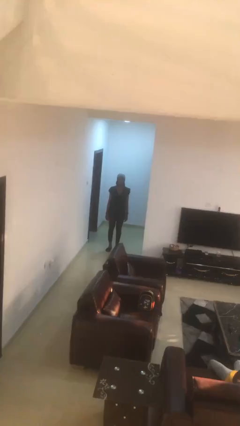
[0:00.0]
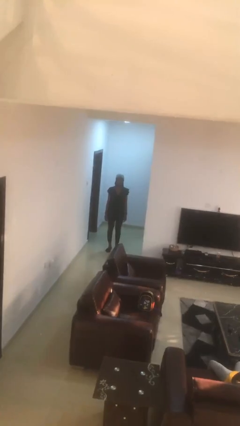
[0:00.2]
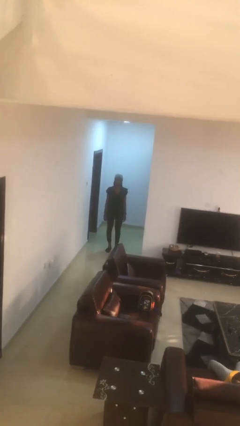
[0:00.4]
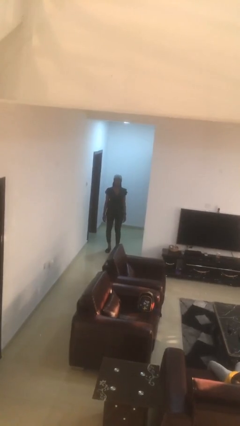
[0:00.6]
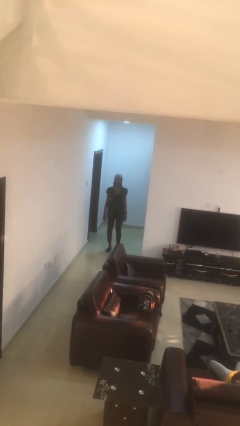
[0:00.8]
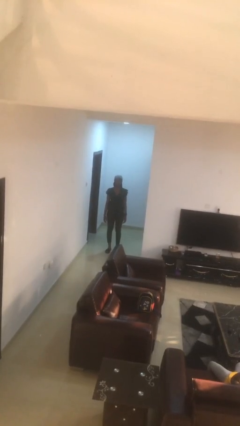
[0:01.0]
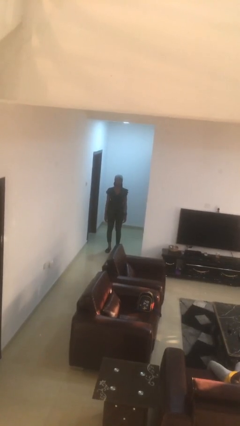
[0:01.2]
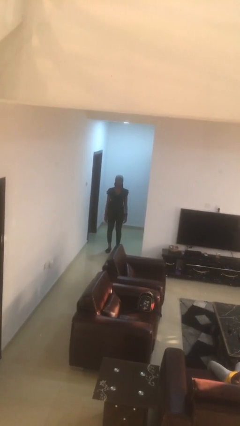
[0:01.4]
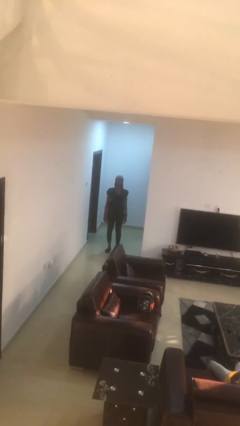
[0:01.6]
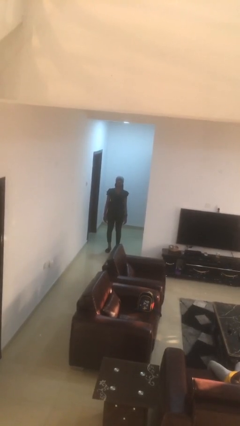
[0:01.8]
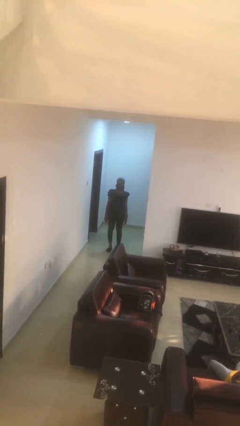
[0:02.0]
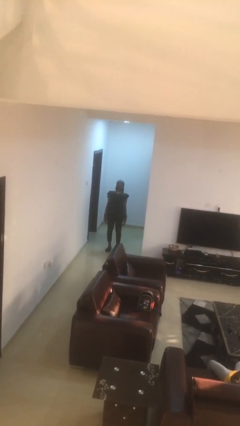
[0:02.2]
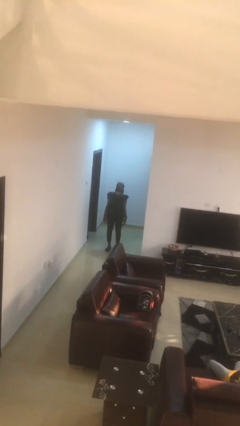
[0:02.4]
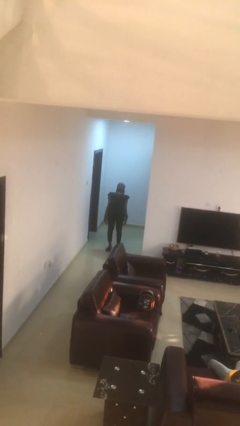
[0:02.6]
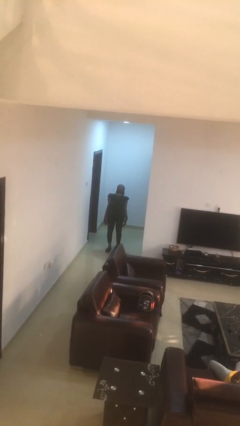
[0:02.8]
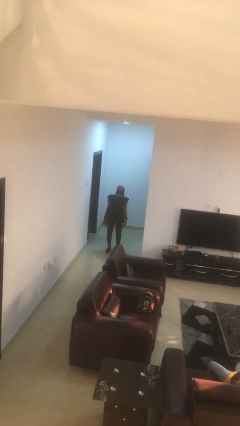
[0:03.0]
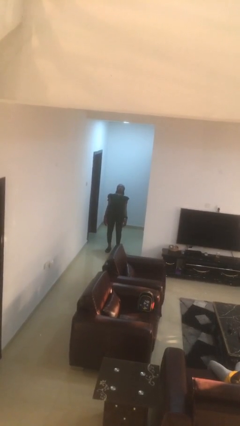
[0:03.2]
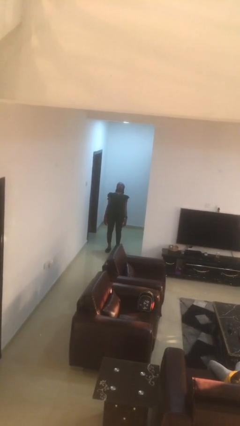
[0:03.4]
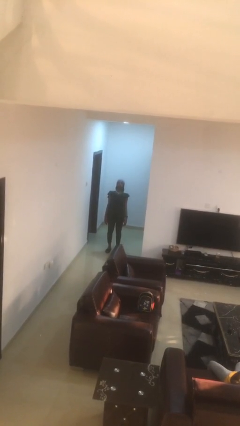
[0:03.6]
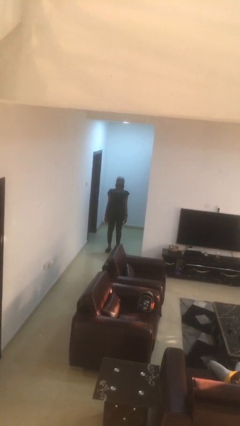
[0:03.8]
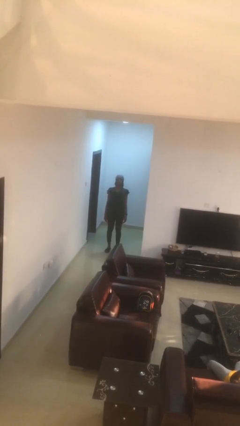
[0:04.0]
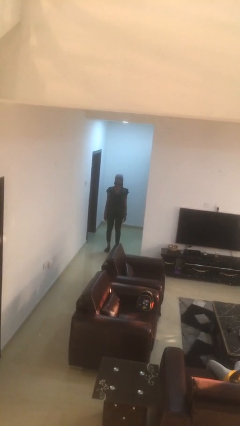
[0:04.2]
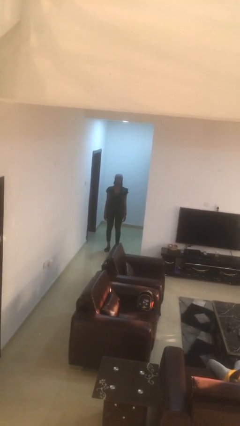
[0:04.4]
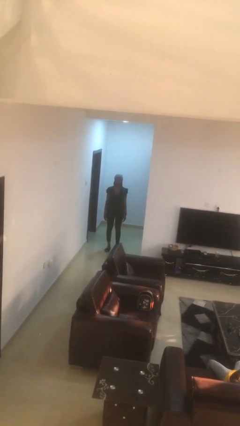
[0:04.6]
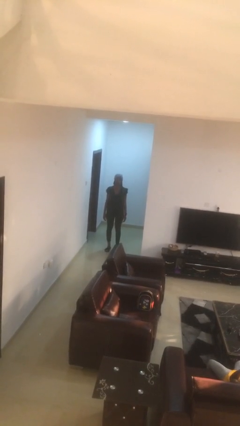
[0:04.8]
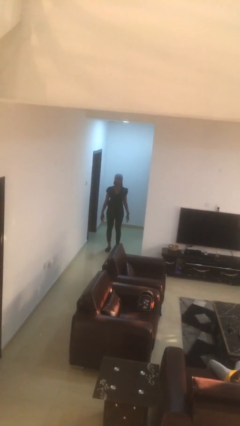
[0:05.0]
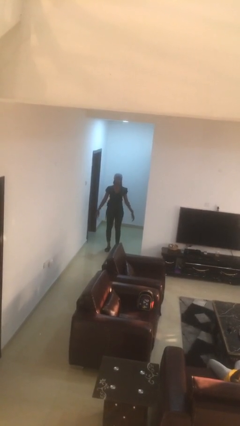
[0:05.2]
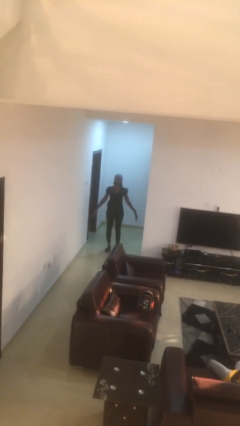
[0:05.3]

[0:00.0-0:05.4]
person stretches back

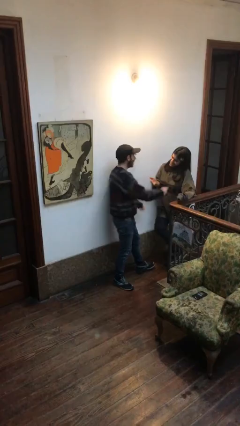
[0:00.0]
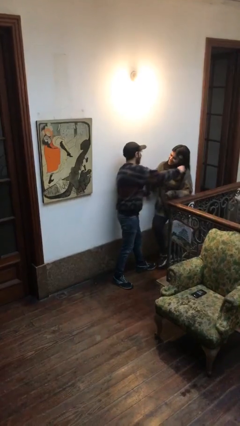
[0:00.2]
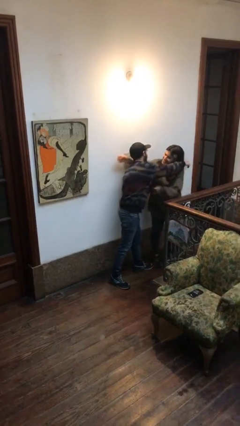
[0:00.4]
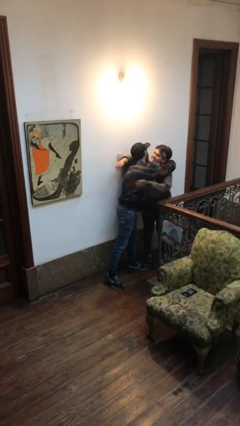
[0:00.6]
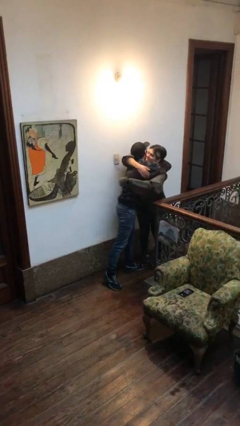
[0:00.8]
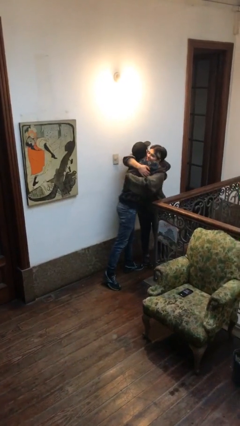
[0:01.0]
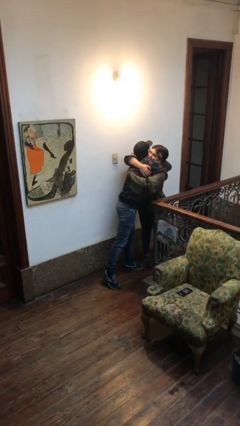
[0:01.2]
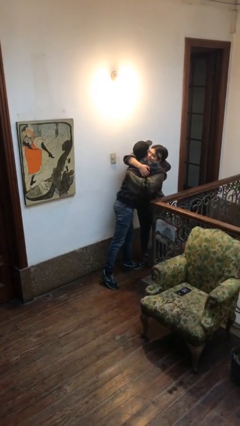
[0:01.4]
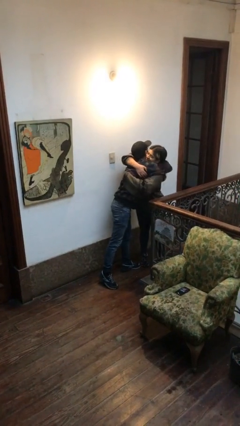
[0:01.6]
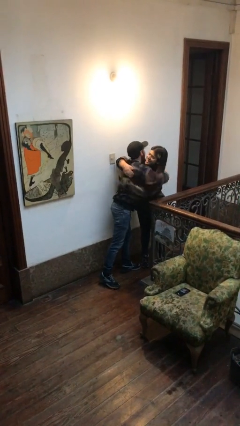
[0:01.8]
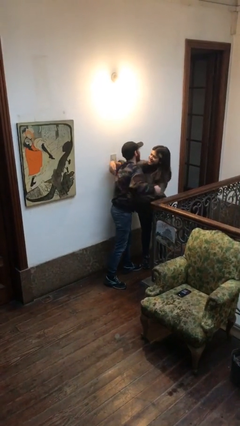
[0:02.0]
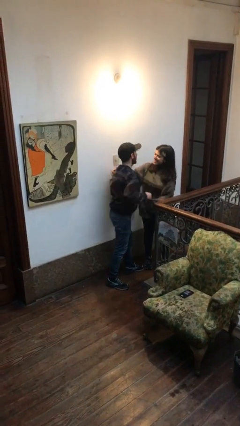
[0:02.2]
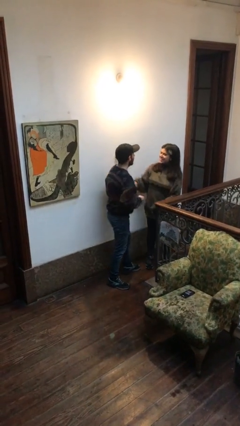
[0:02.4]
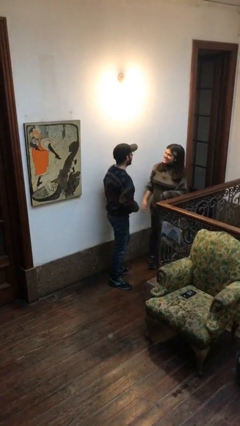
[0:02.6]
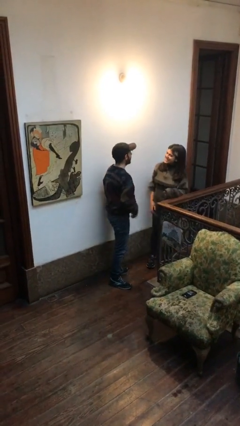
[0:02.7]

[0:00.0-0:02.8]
person embraces person

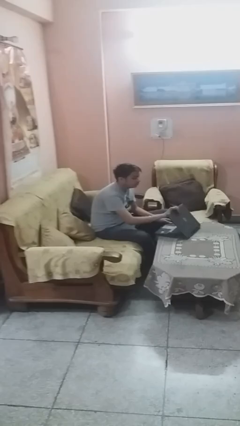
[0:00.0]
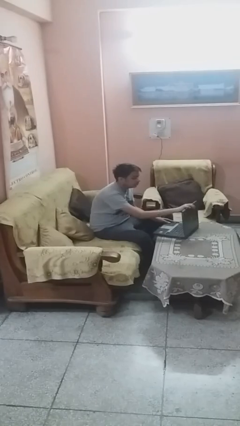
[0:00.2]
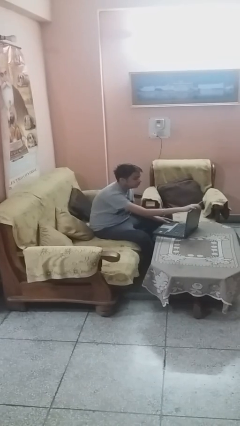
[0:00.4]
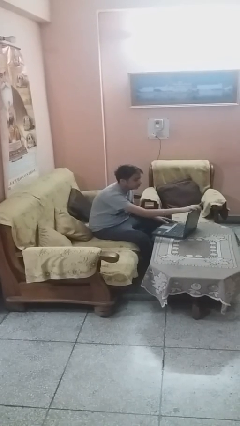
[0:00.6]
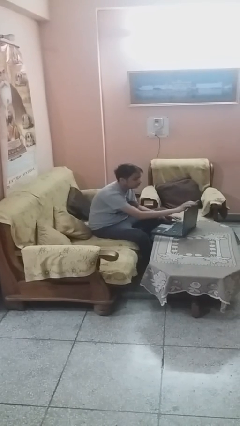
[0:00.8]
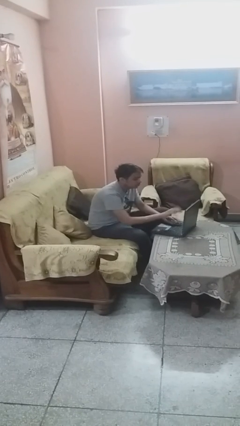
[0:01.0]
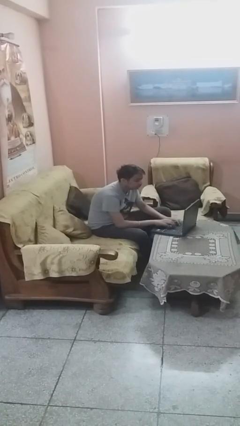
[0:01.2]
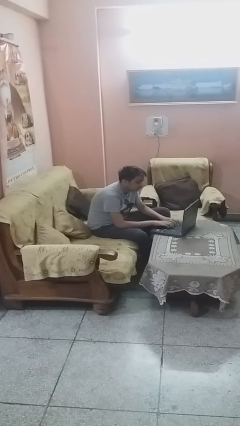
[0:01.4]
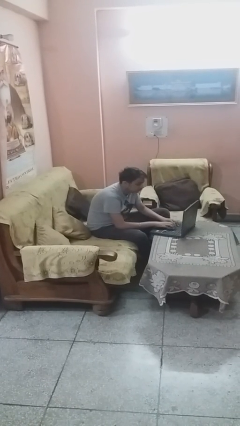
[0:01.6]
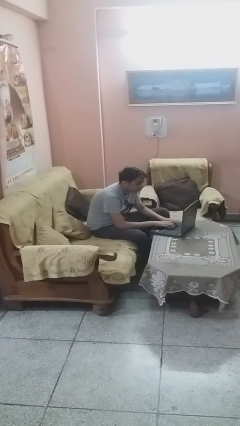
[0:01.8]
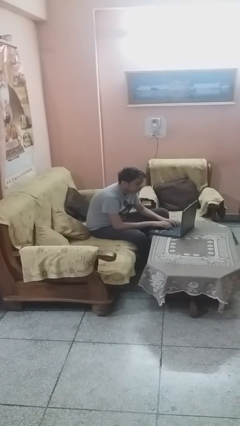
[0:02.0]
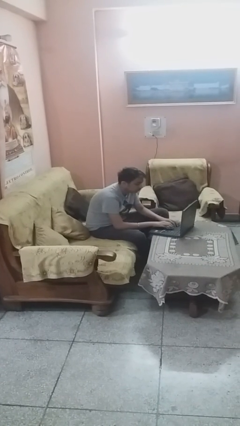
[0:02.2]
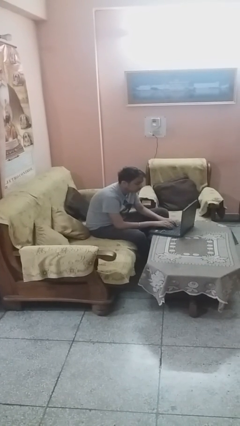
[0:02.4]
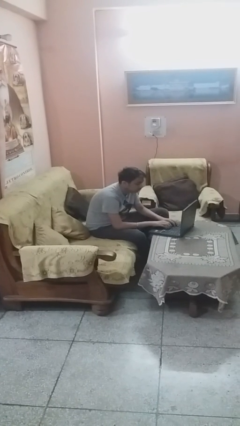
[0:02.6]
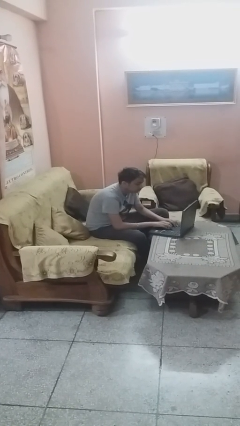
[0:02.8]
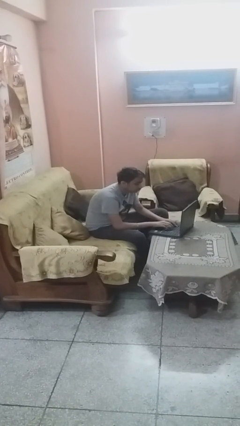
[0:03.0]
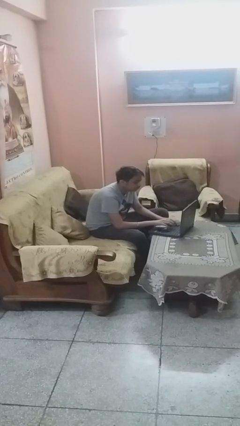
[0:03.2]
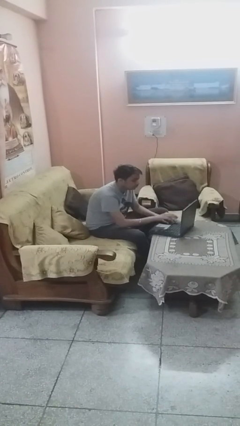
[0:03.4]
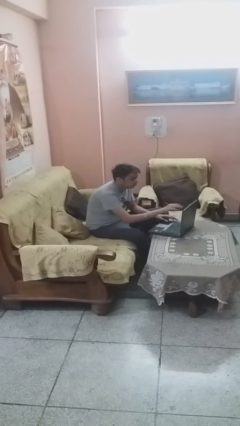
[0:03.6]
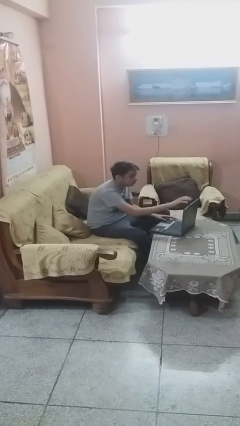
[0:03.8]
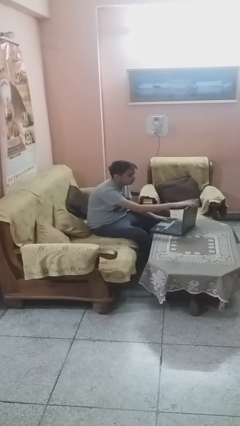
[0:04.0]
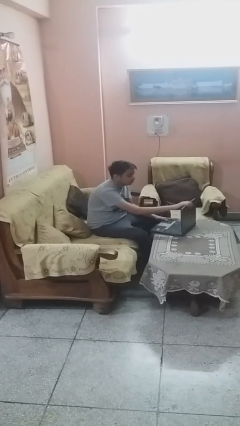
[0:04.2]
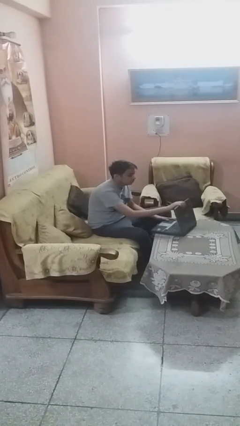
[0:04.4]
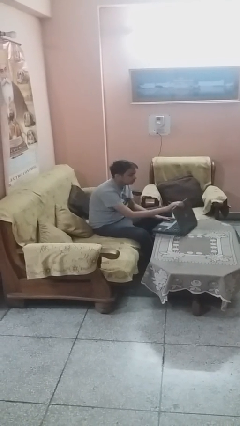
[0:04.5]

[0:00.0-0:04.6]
person interacts with laptop

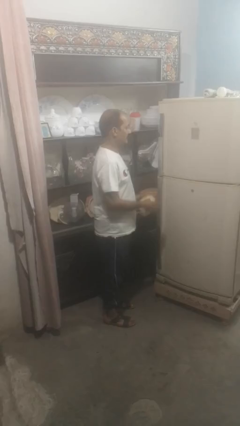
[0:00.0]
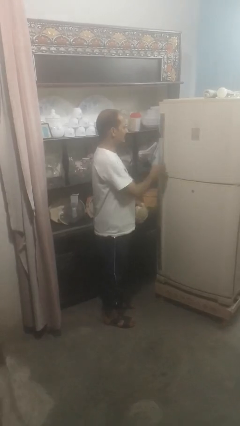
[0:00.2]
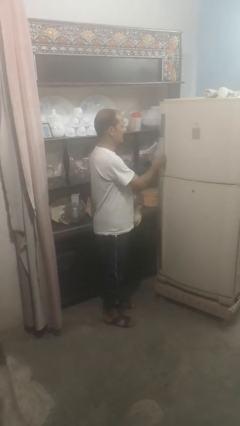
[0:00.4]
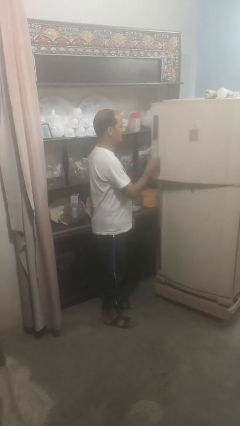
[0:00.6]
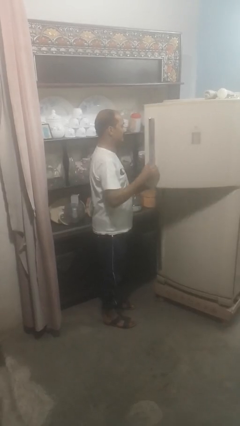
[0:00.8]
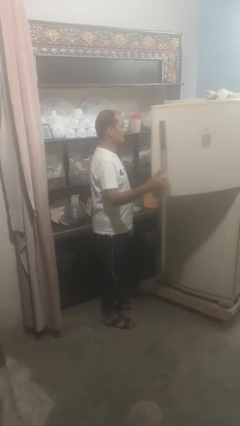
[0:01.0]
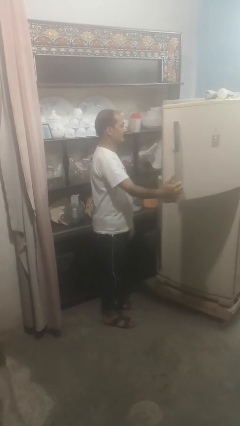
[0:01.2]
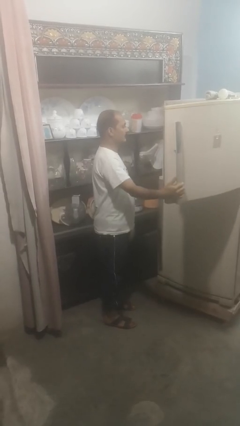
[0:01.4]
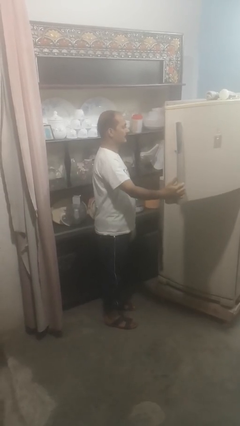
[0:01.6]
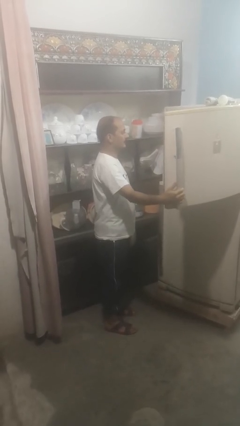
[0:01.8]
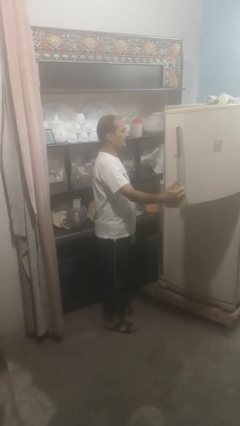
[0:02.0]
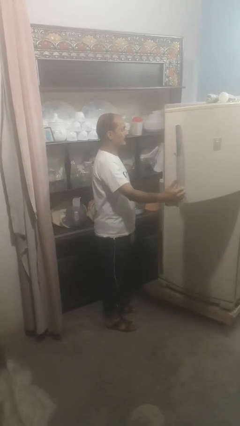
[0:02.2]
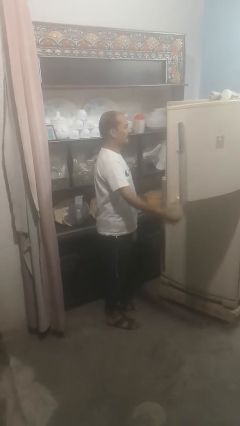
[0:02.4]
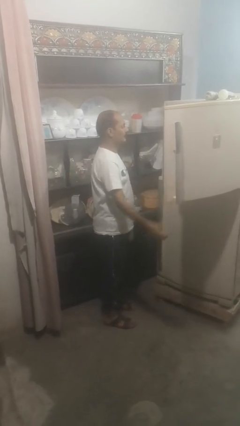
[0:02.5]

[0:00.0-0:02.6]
person opens refrigerator

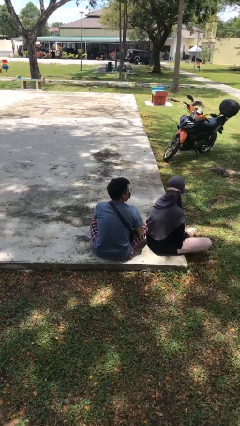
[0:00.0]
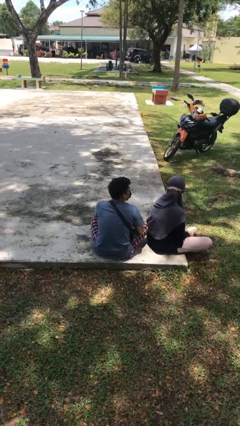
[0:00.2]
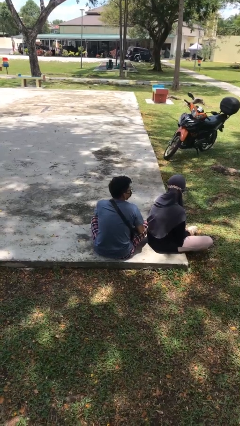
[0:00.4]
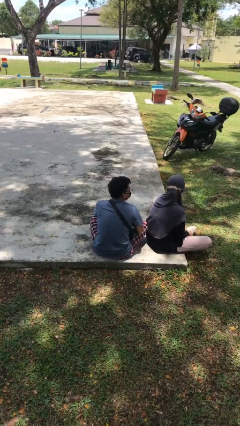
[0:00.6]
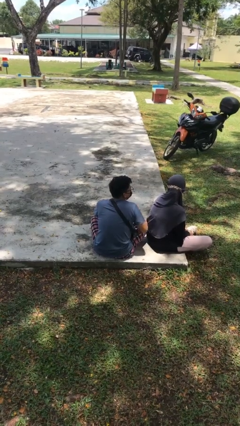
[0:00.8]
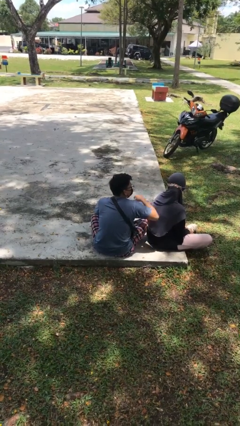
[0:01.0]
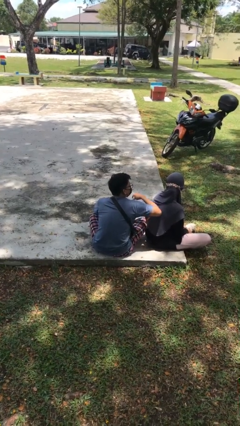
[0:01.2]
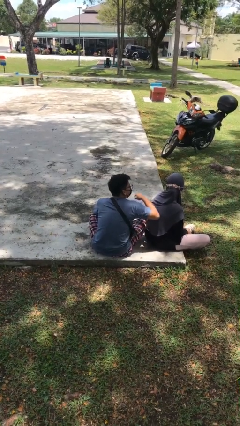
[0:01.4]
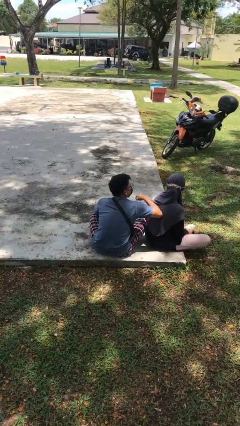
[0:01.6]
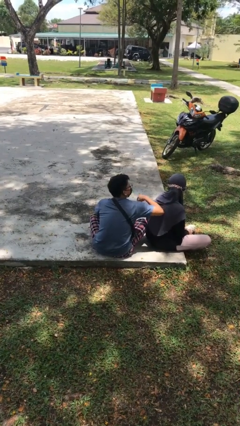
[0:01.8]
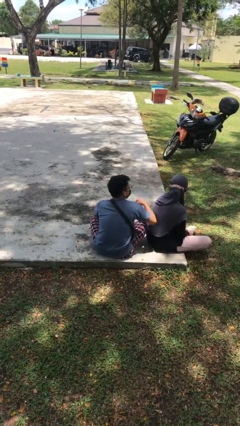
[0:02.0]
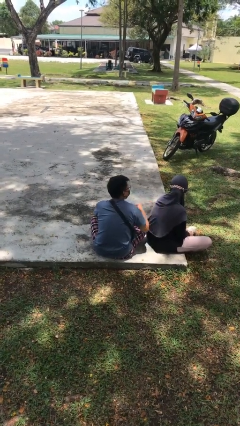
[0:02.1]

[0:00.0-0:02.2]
person nudges person with elbow
